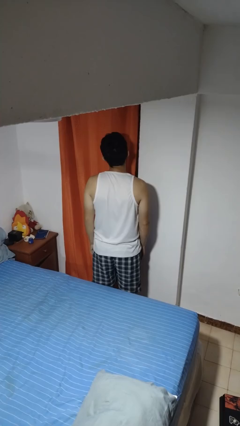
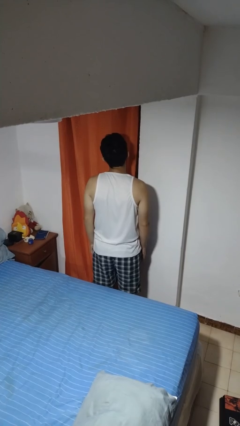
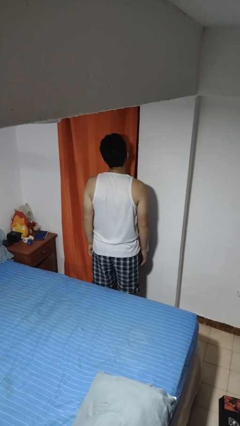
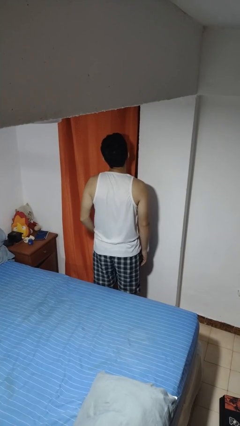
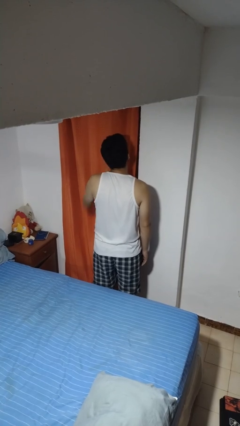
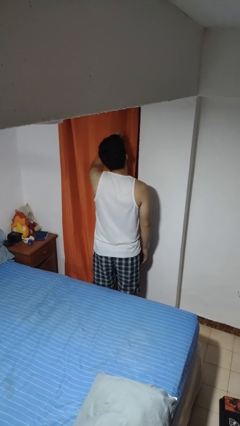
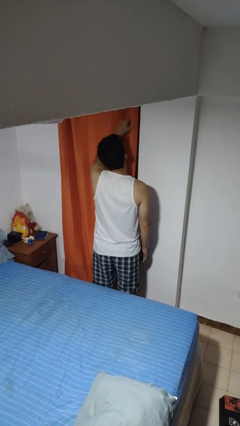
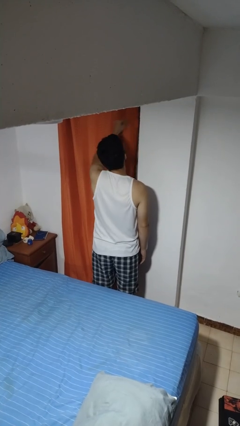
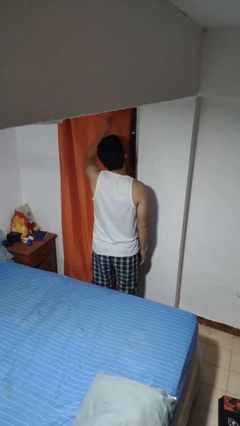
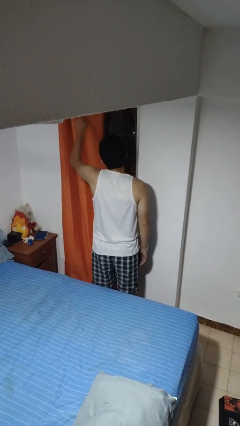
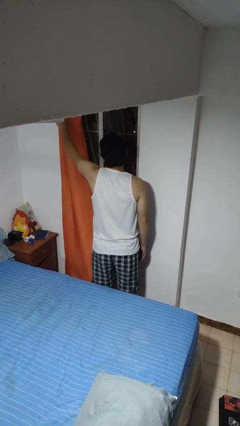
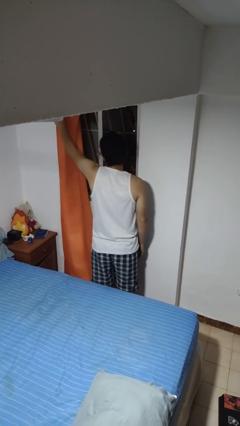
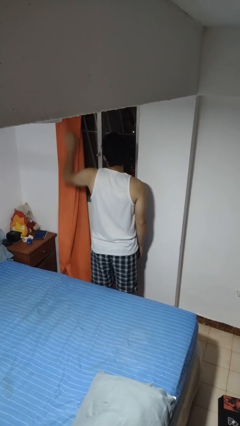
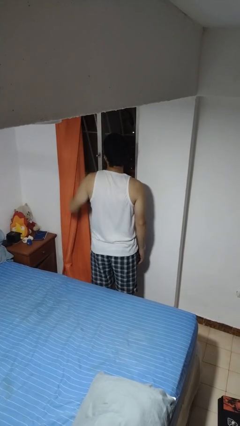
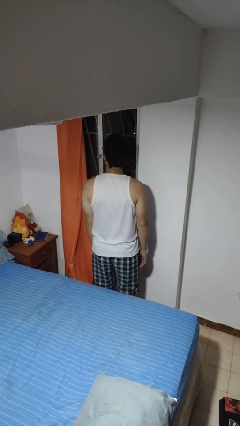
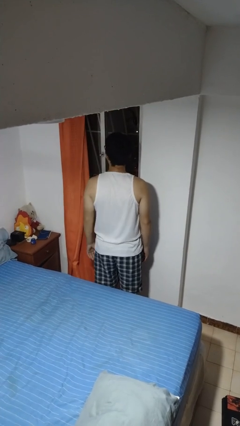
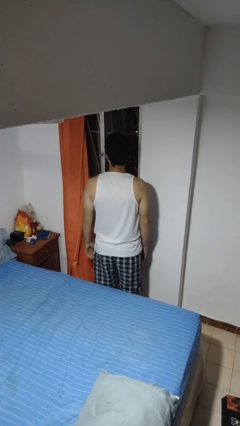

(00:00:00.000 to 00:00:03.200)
person opens curtains

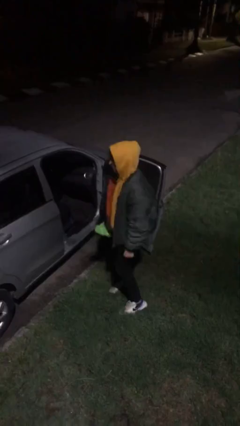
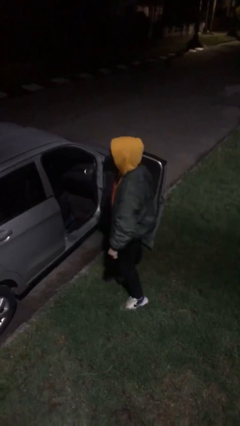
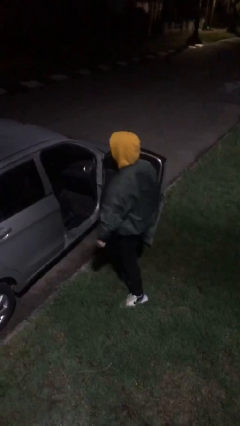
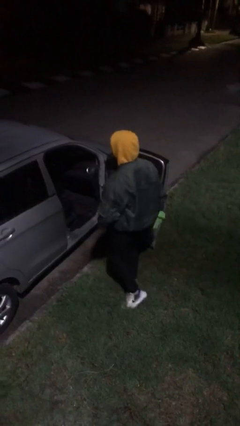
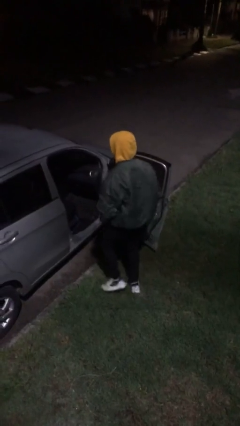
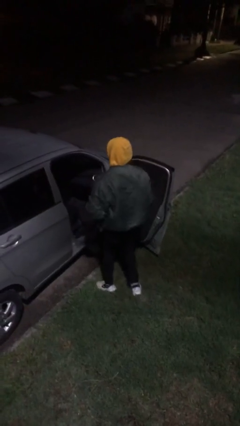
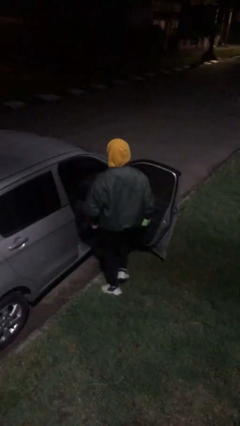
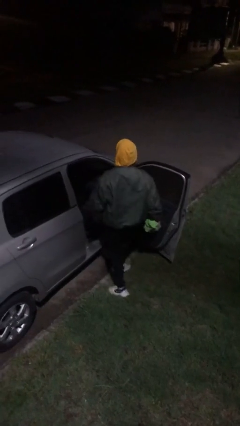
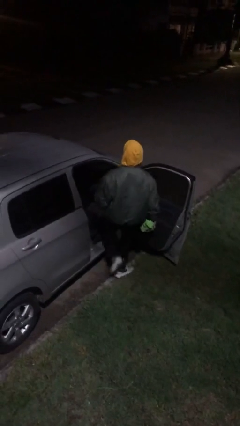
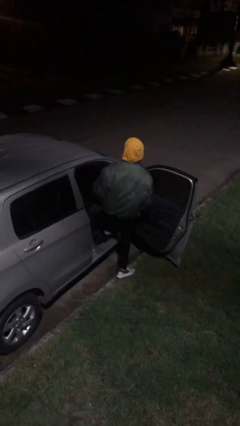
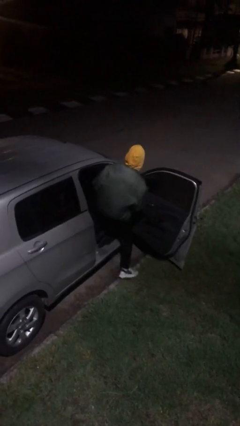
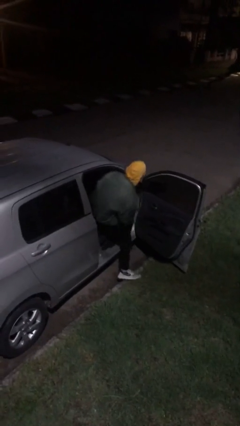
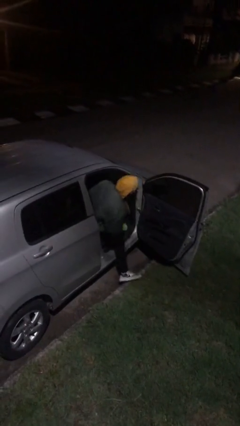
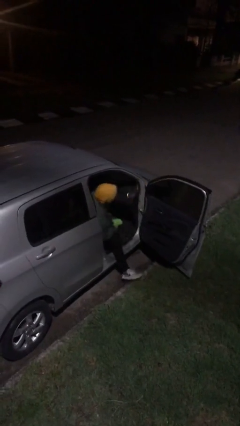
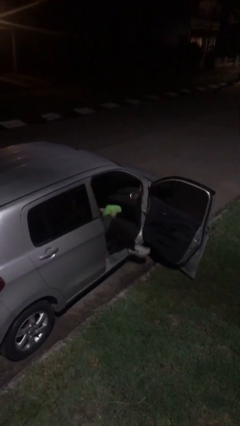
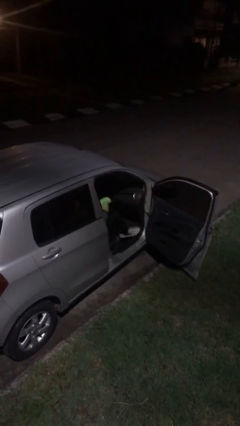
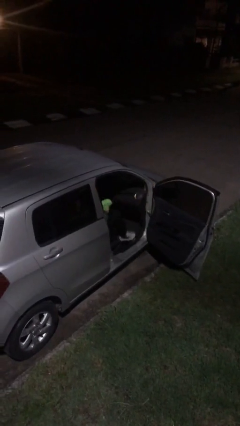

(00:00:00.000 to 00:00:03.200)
person enters car

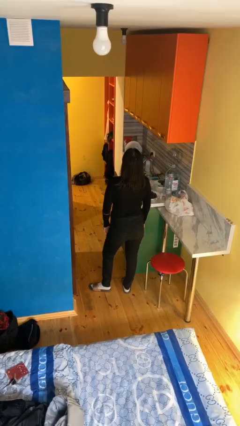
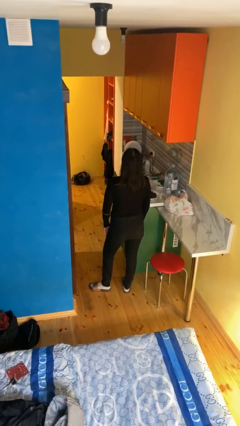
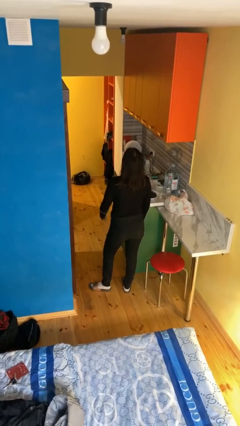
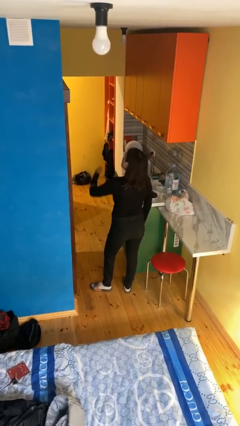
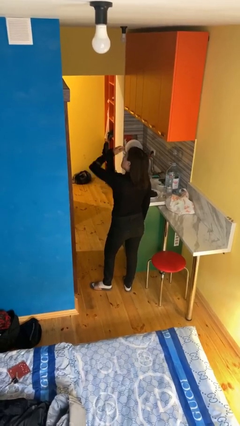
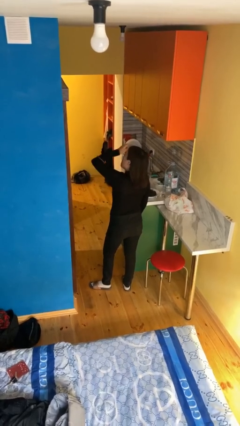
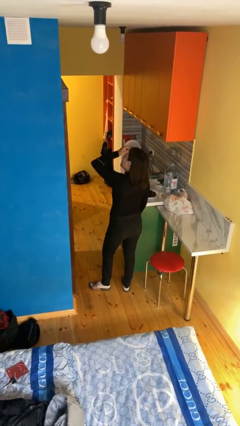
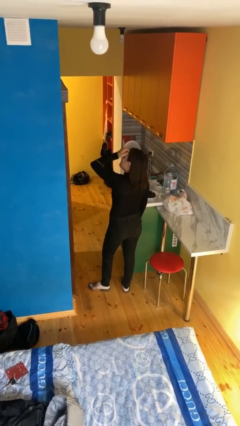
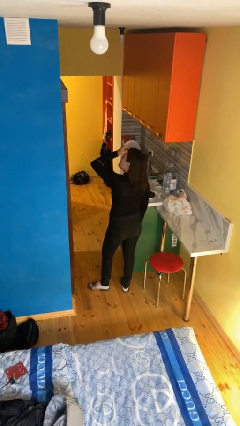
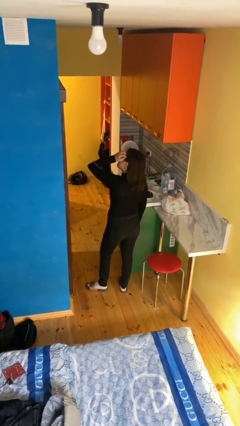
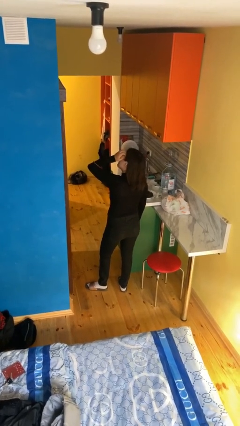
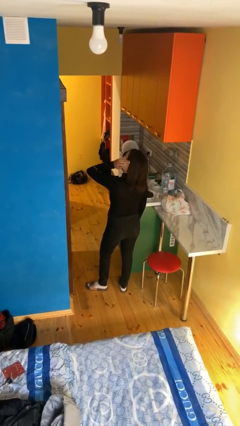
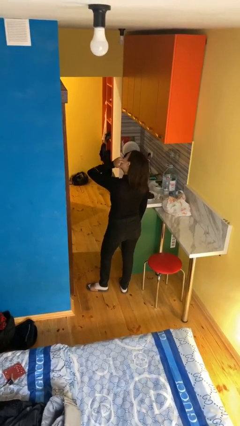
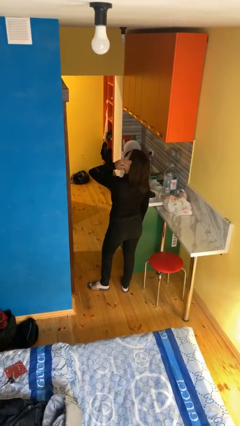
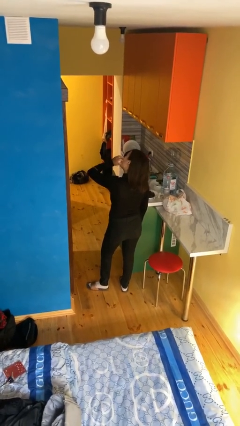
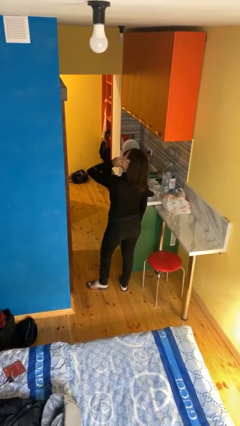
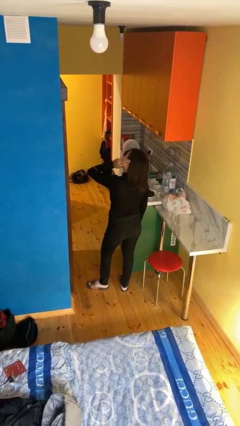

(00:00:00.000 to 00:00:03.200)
person scratches face

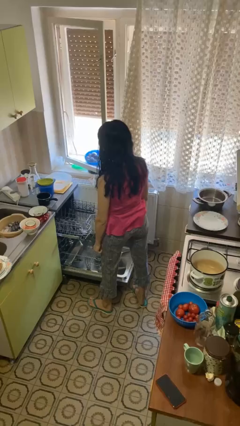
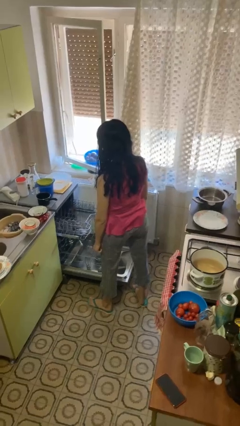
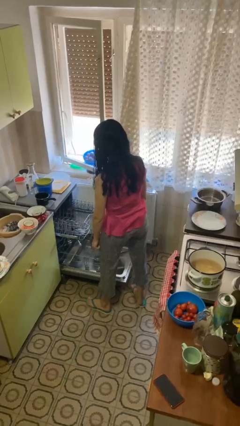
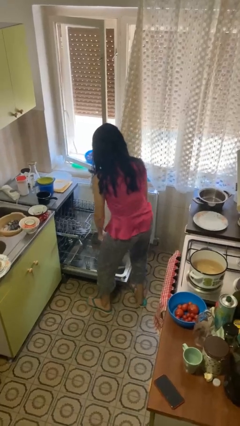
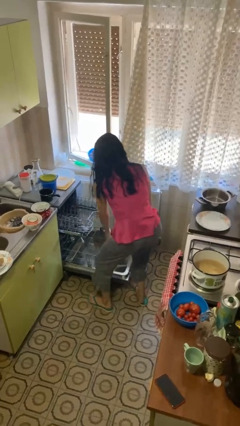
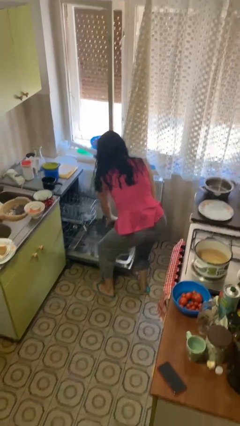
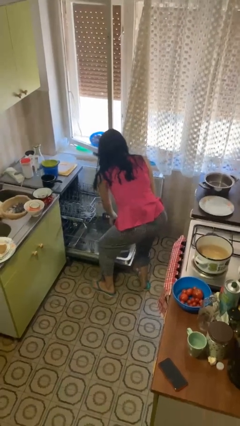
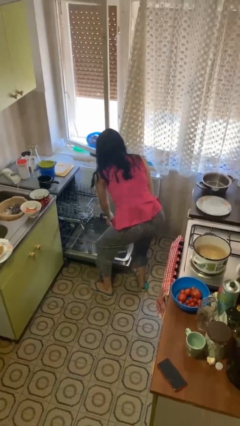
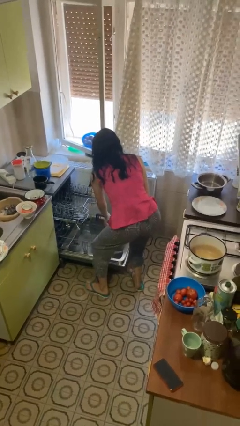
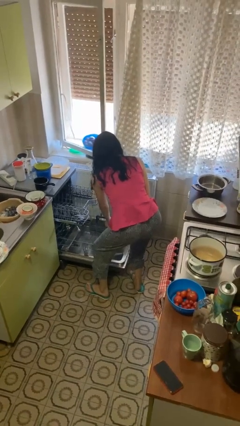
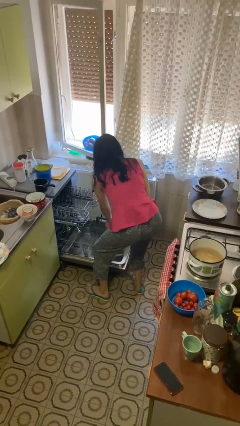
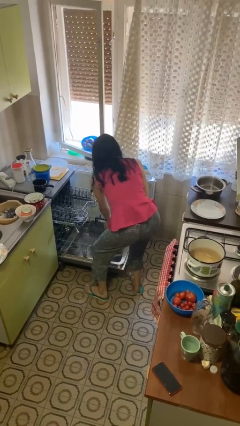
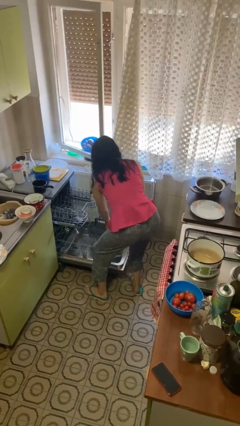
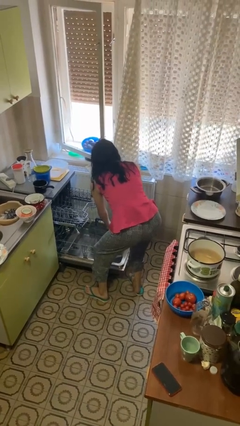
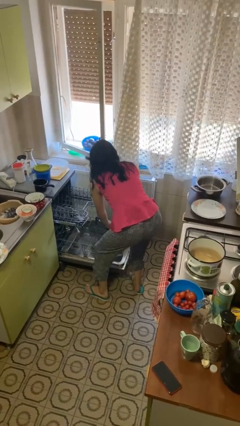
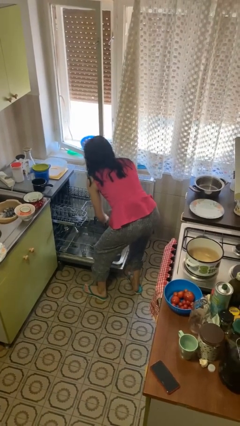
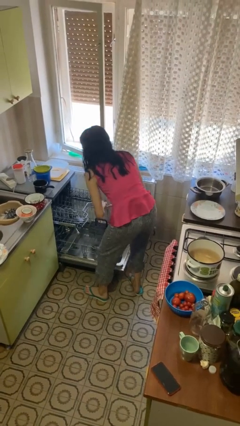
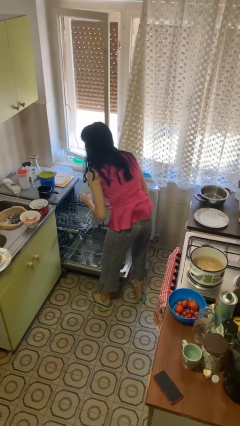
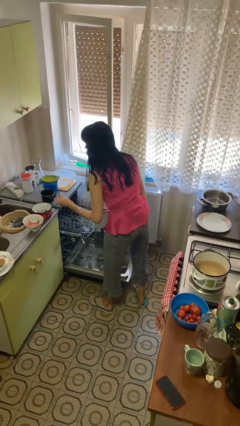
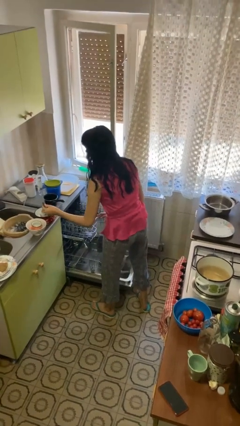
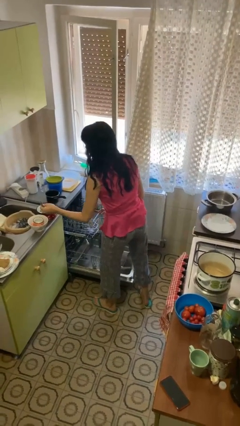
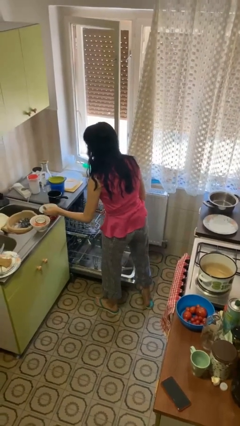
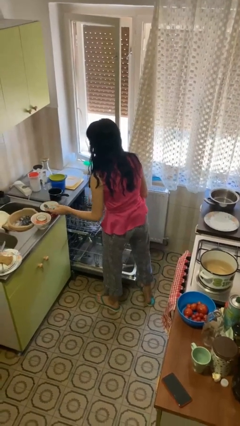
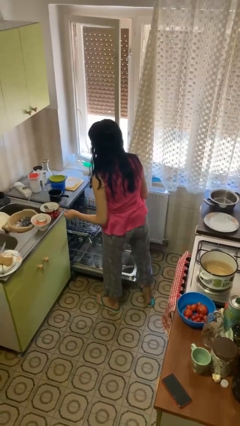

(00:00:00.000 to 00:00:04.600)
person unloads dishwasher

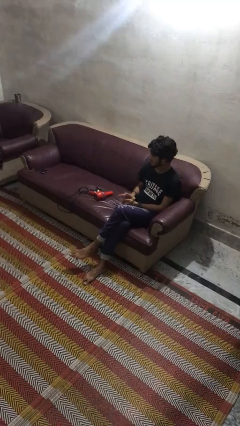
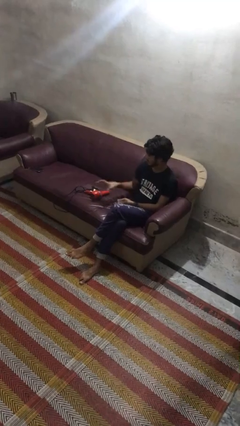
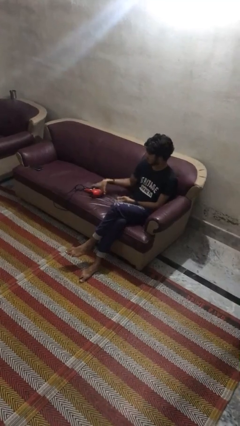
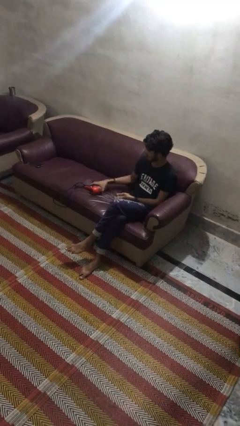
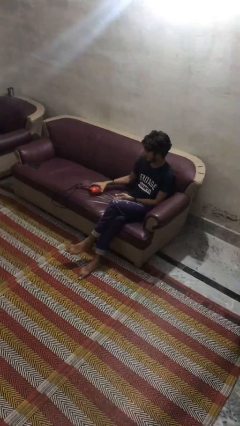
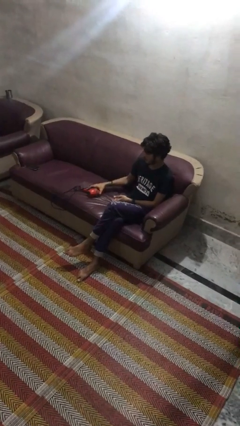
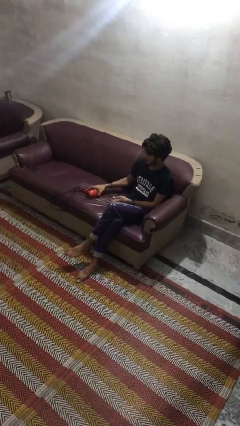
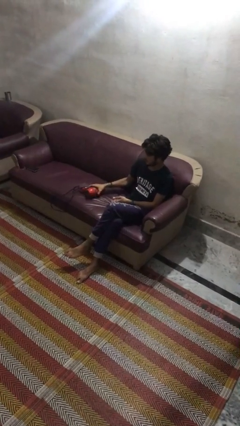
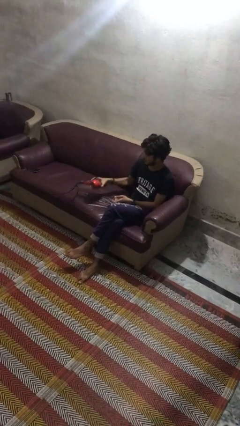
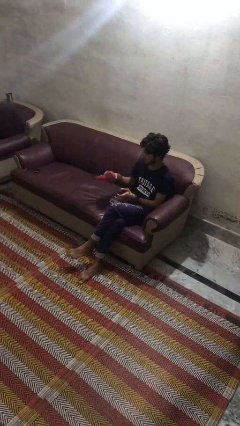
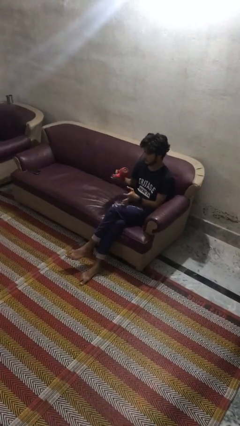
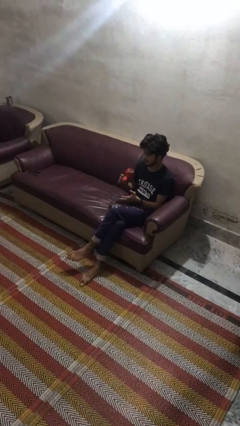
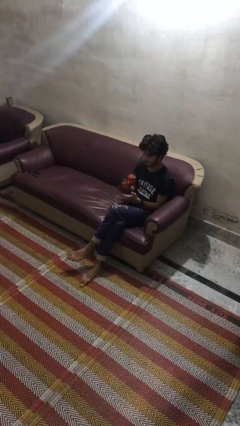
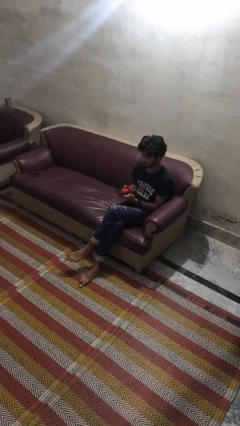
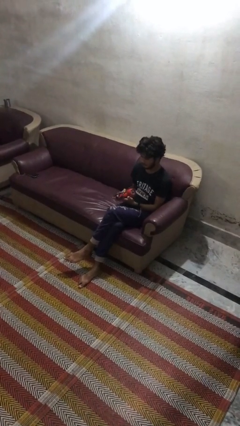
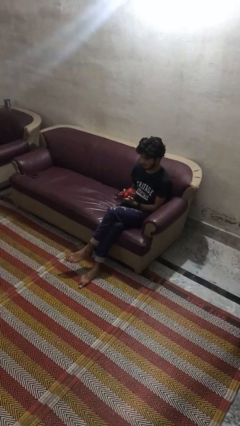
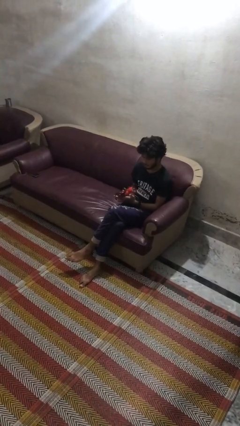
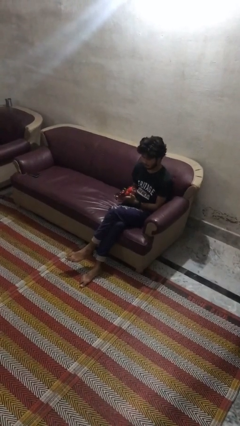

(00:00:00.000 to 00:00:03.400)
person picks up object from couch

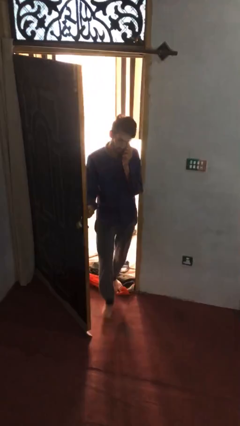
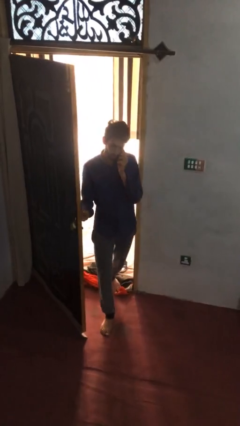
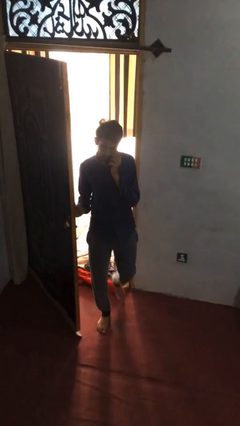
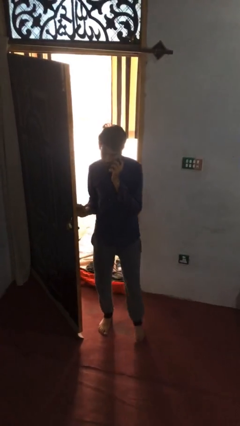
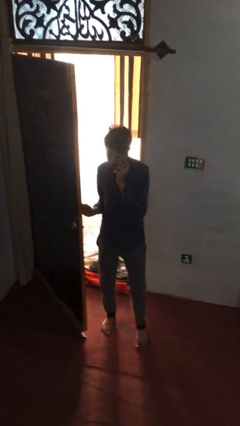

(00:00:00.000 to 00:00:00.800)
person enters scene through structure
